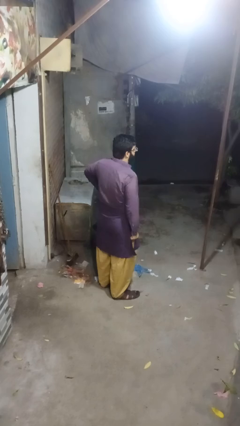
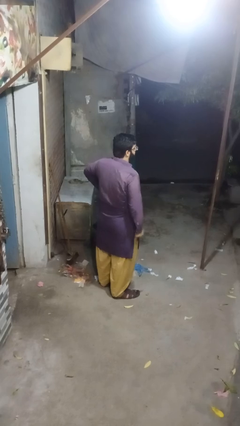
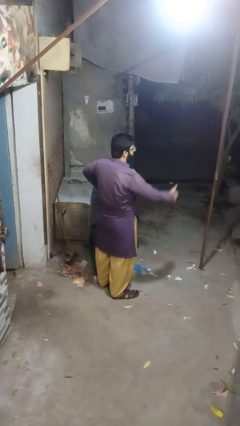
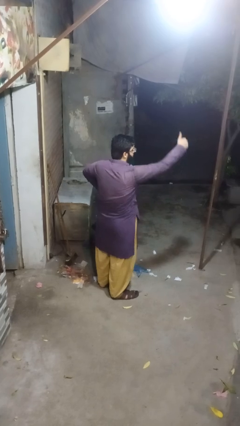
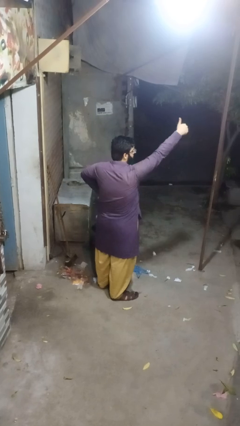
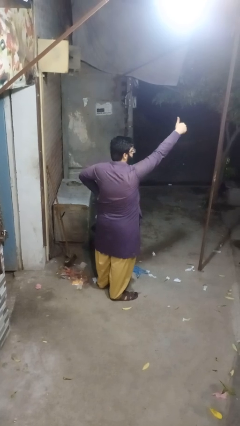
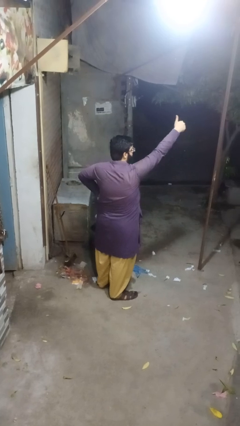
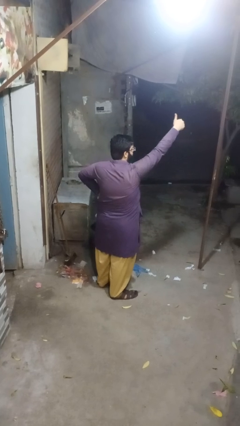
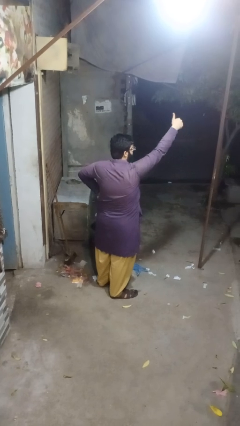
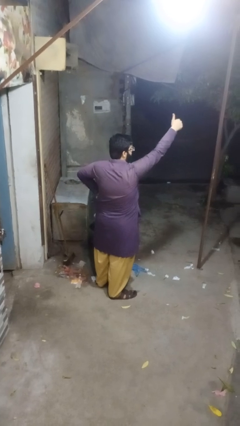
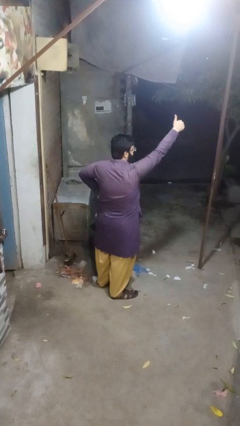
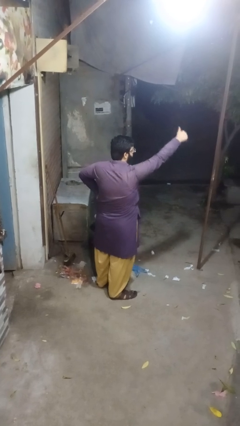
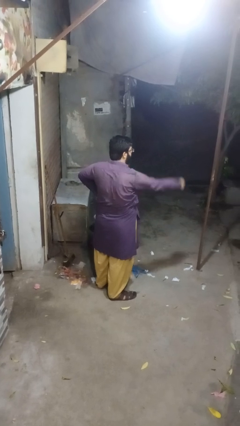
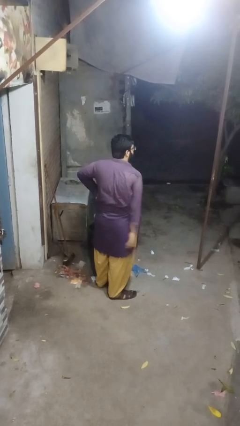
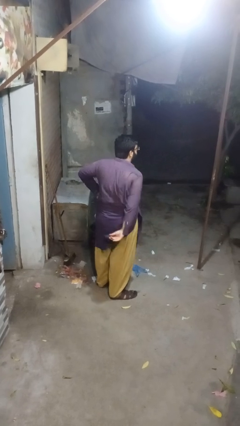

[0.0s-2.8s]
person gestures thumbs up

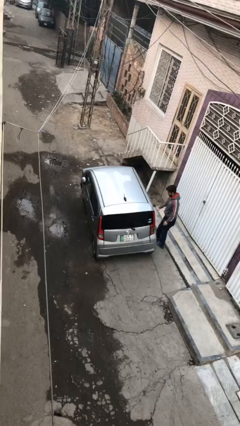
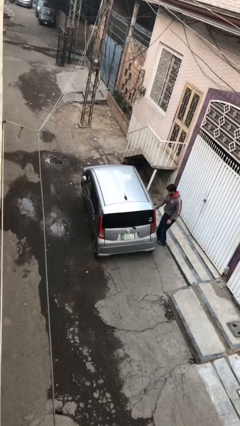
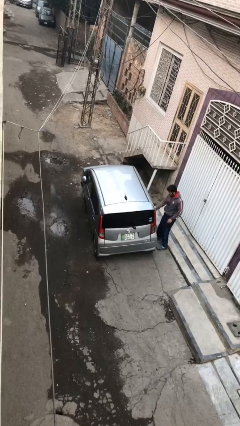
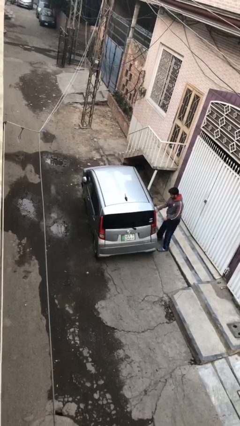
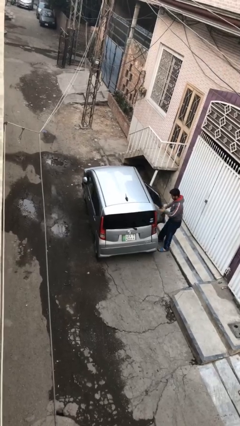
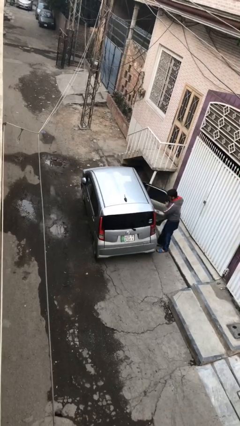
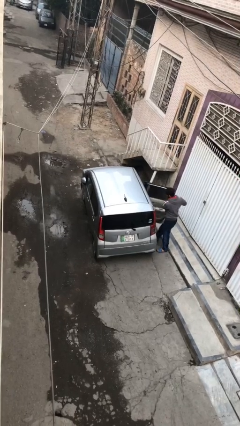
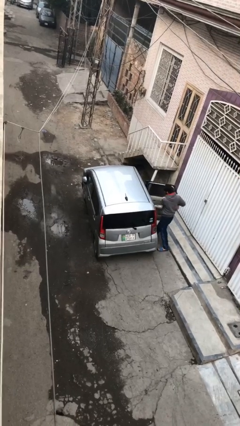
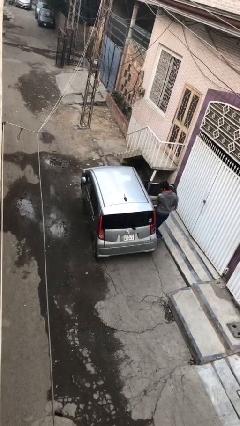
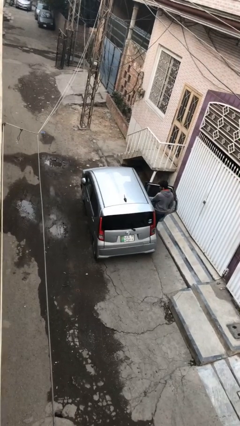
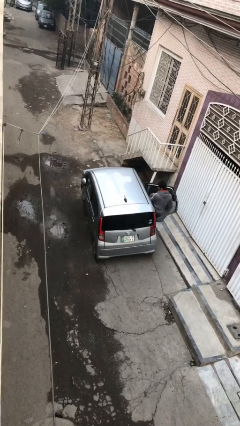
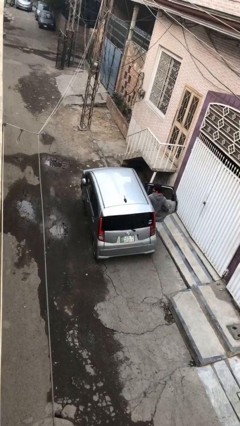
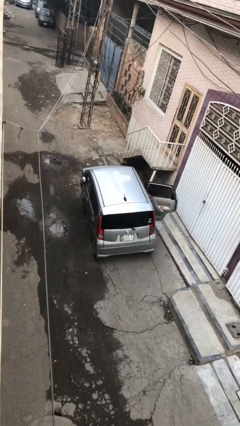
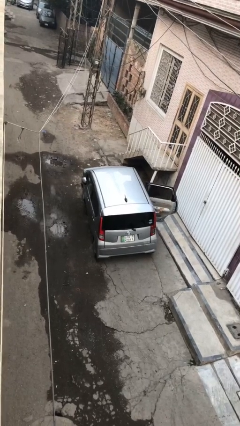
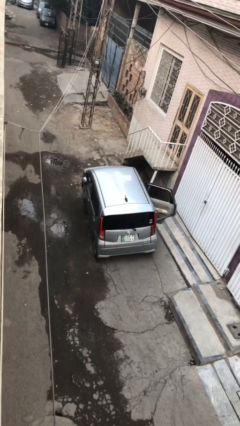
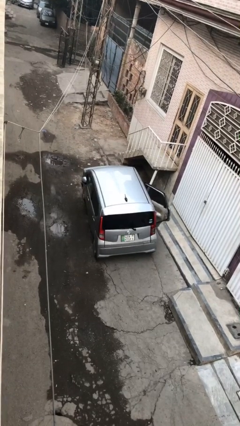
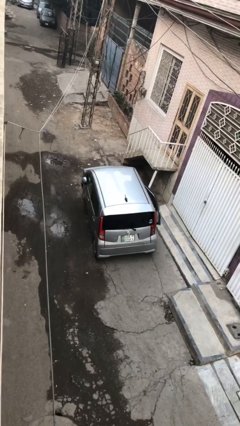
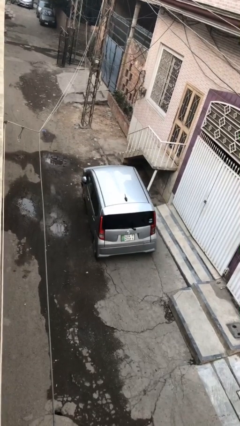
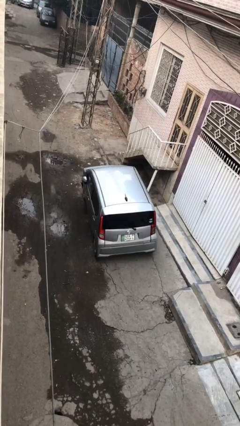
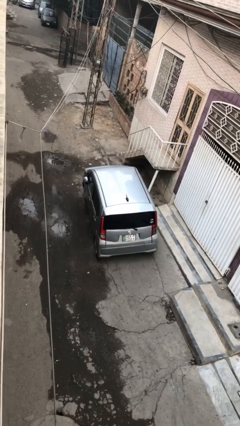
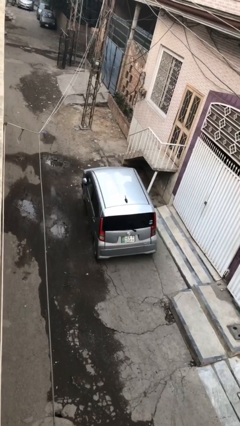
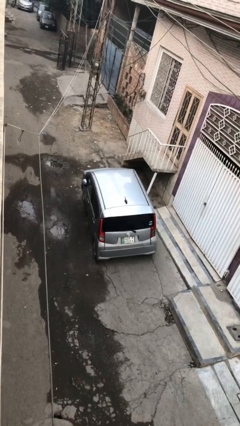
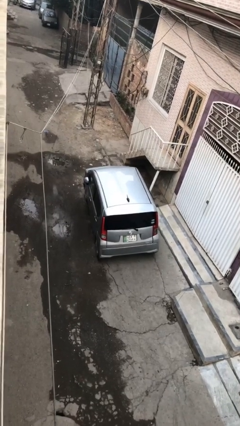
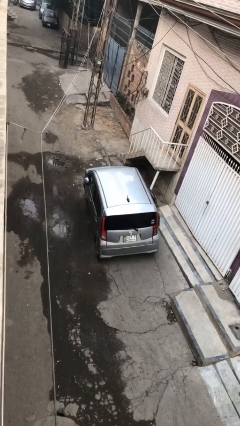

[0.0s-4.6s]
car picks up person

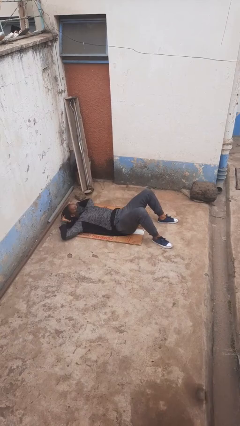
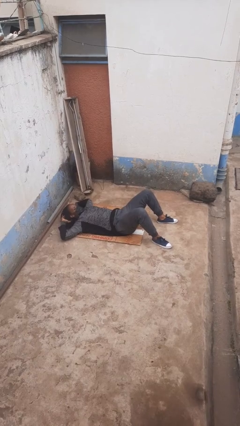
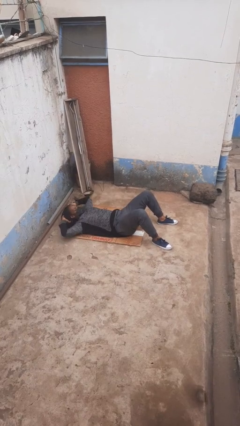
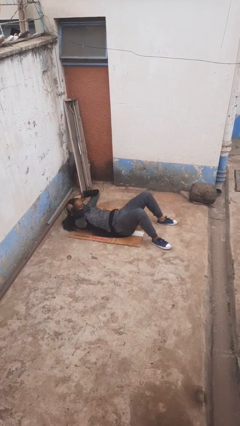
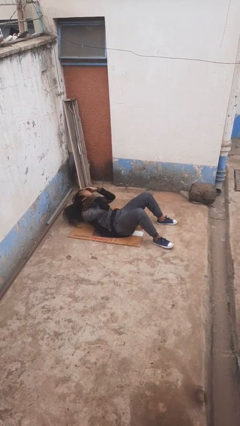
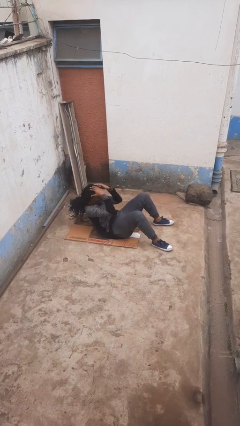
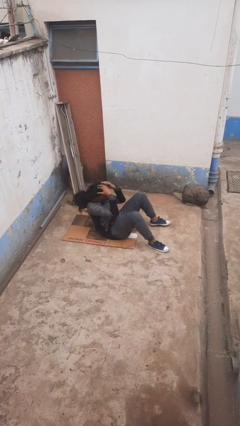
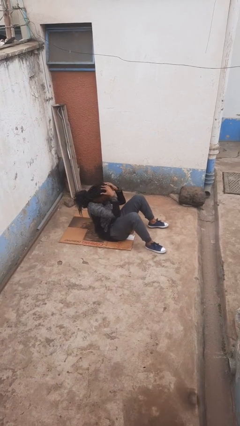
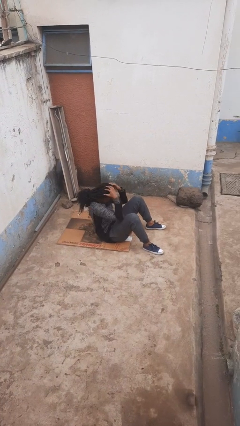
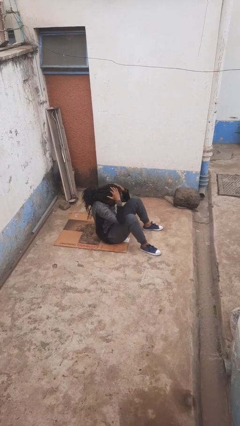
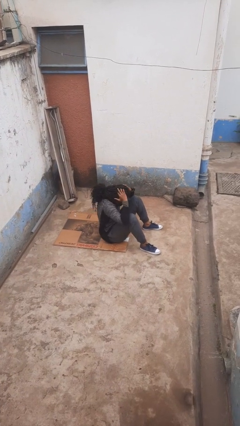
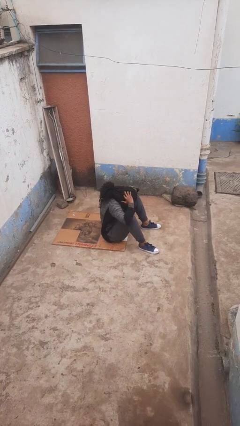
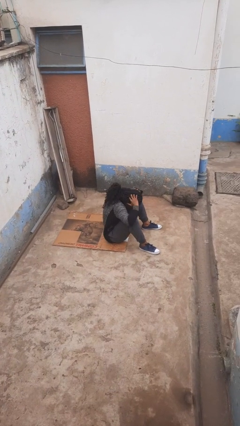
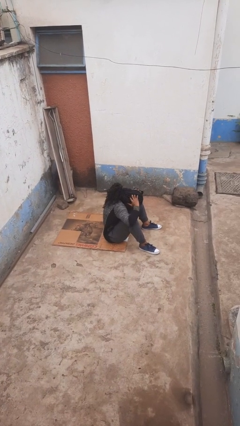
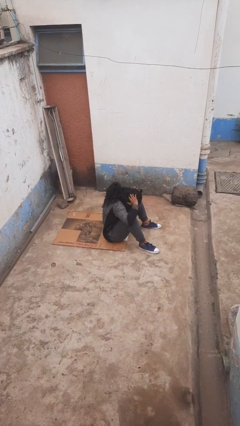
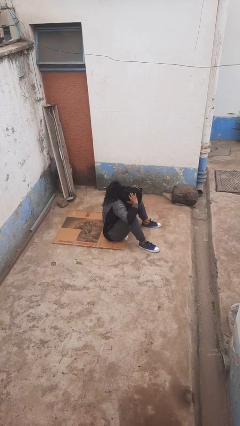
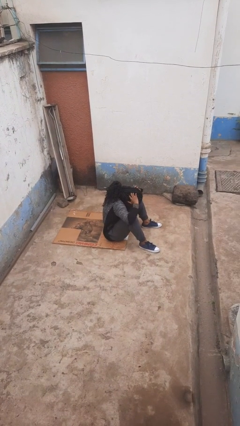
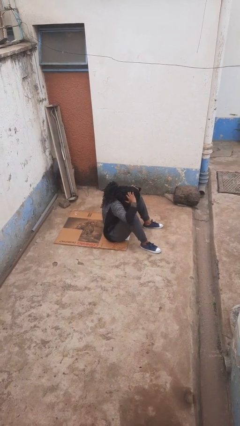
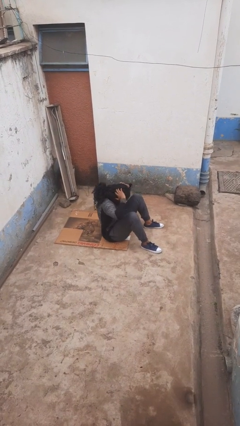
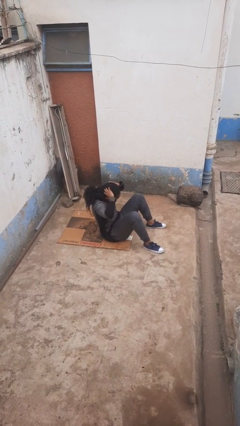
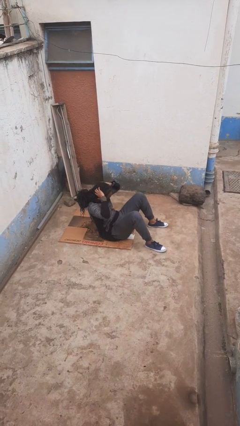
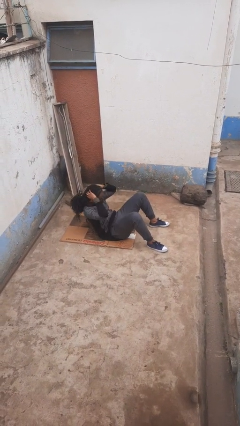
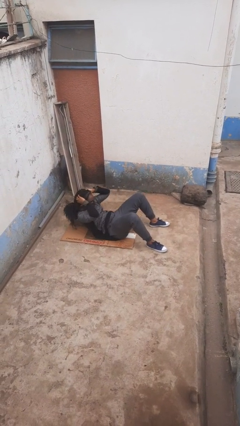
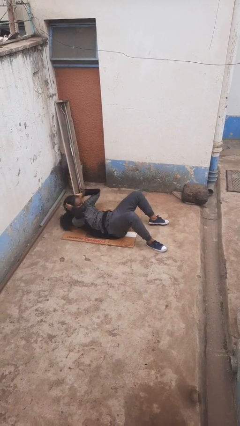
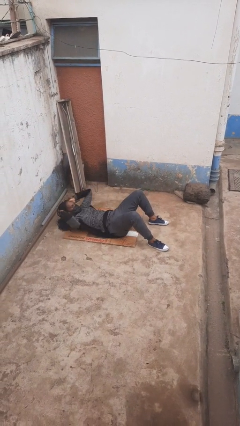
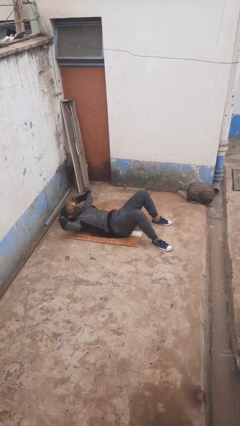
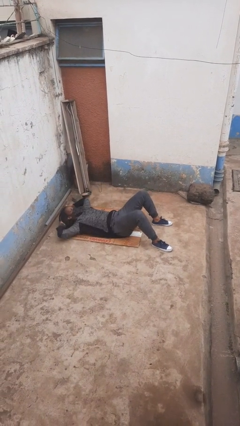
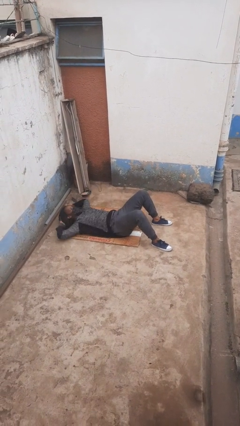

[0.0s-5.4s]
person exercises with situp

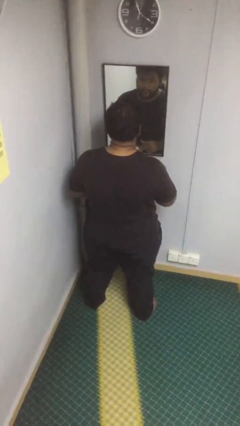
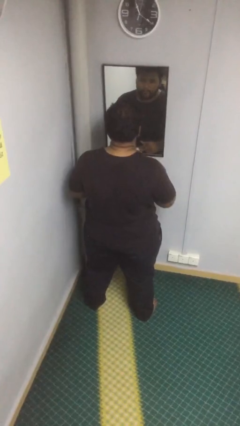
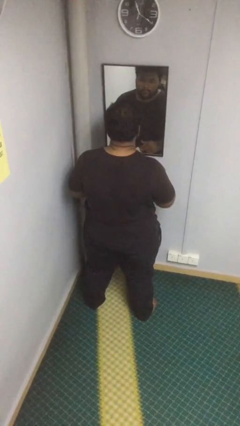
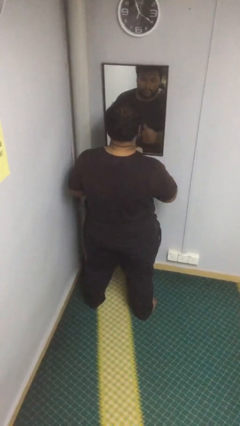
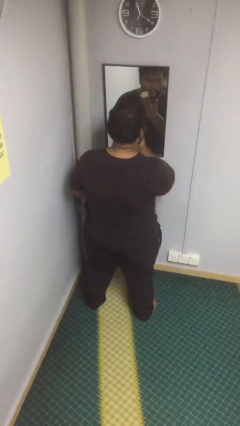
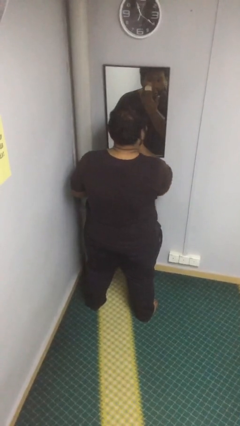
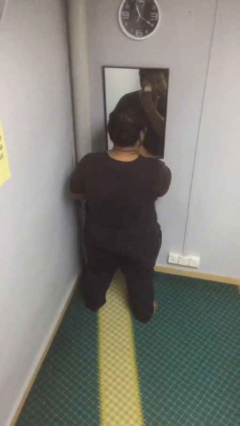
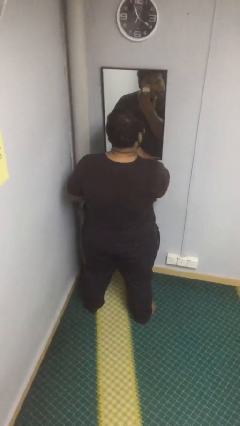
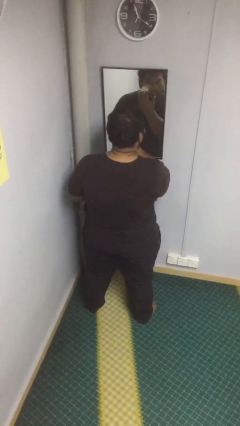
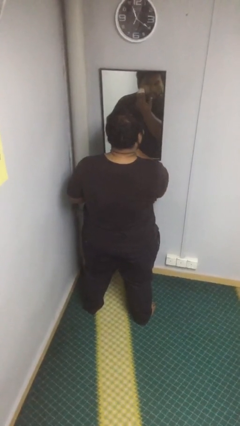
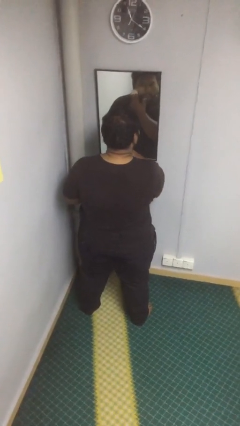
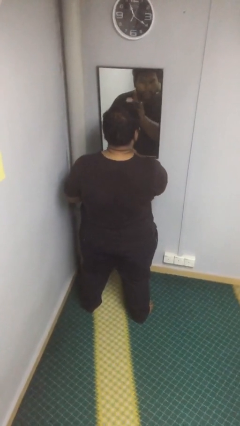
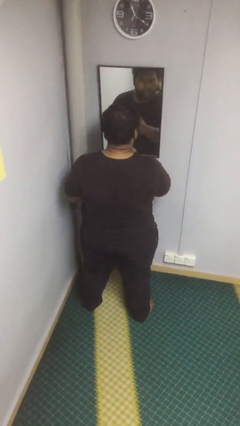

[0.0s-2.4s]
person applies foundation makeup

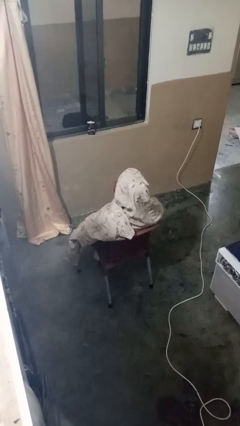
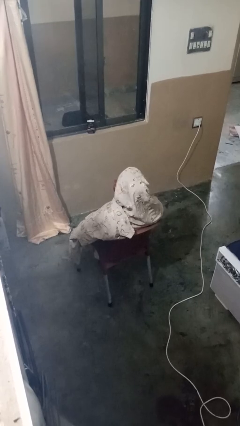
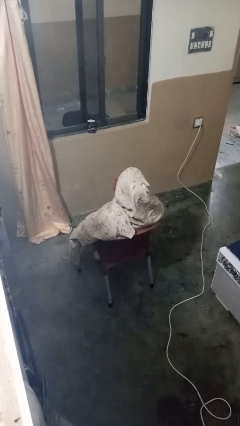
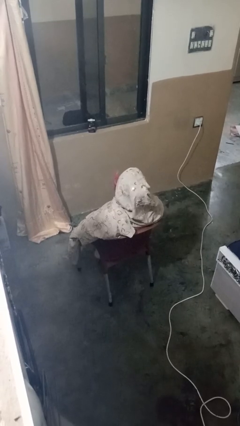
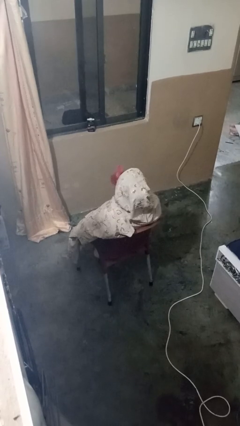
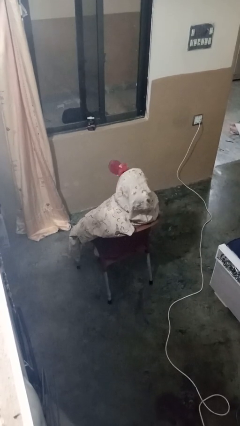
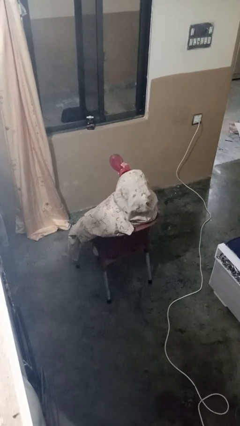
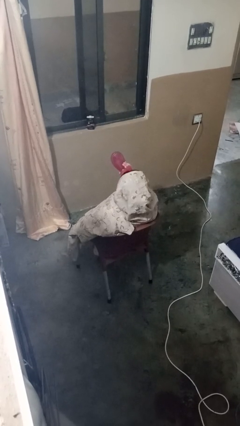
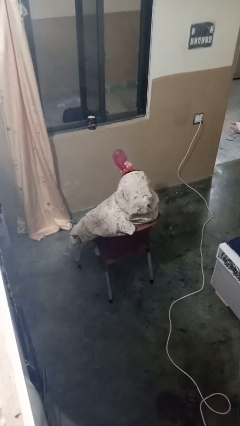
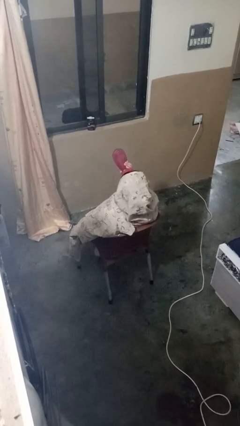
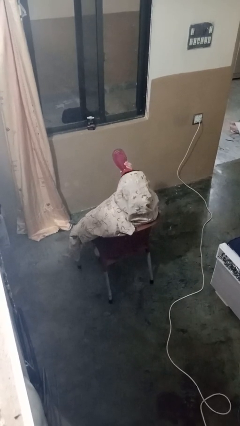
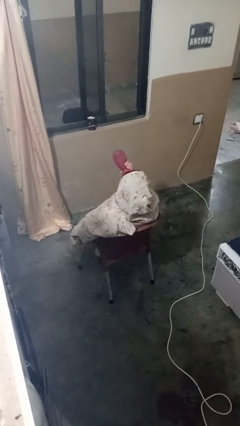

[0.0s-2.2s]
person drinks from bottle

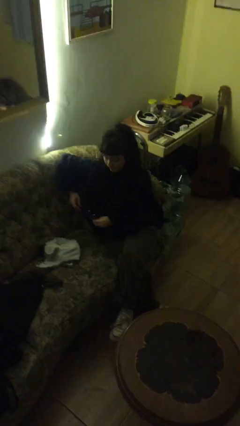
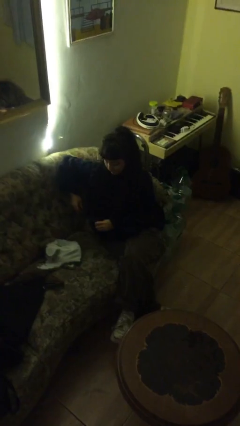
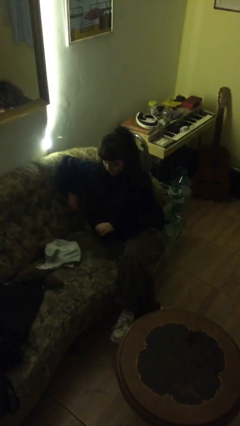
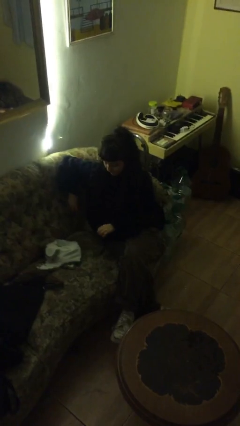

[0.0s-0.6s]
person takes off sunglasses
